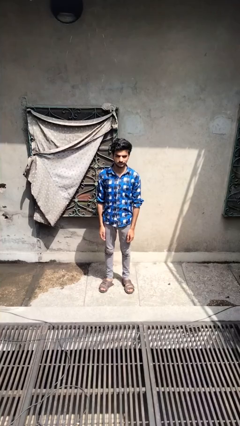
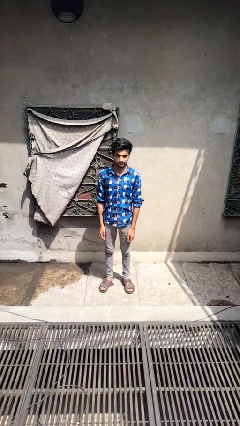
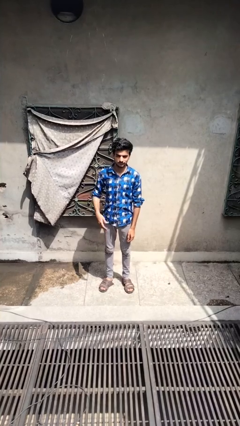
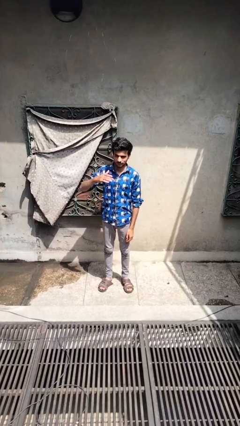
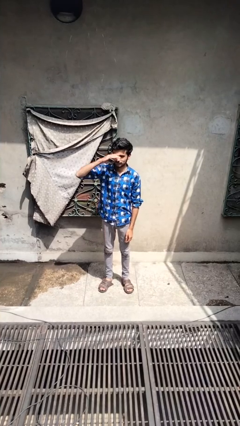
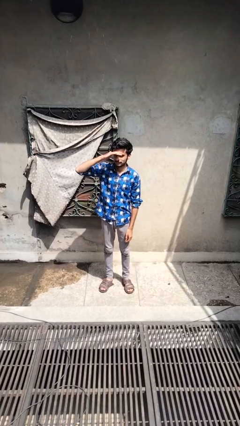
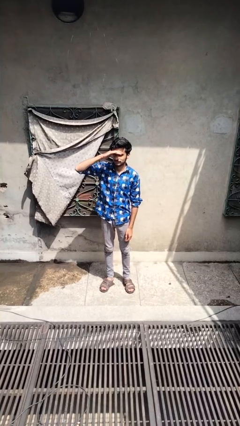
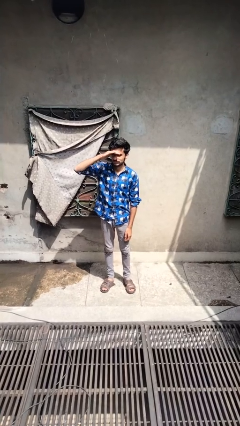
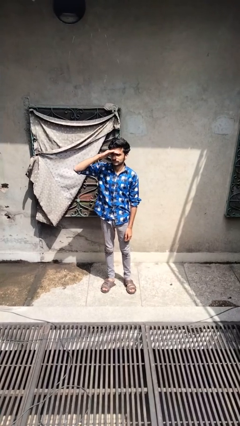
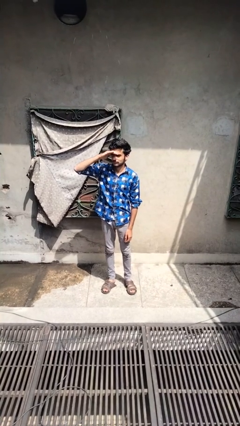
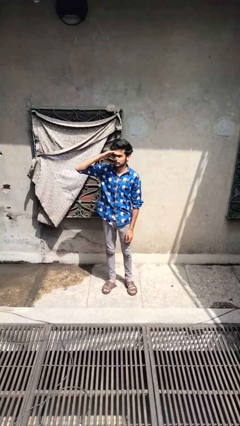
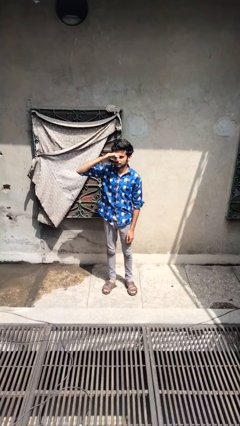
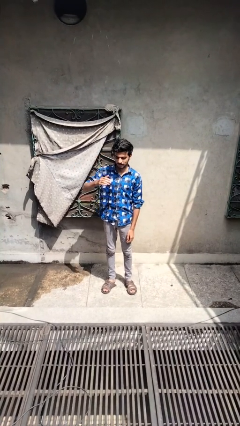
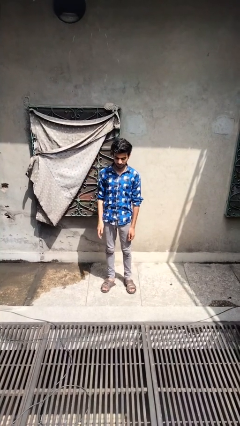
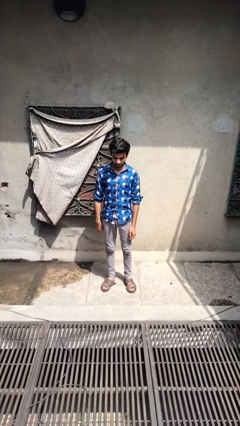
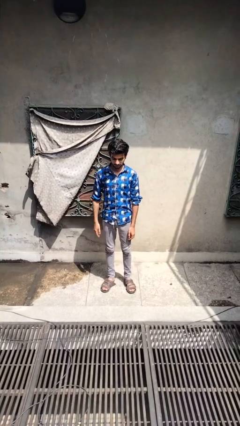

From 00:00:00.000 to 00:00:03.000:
person shades eyes

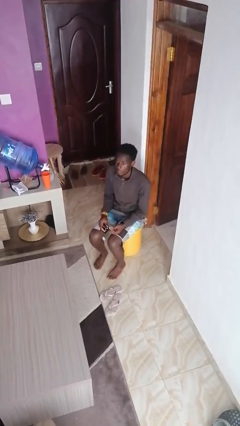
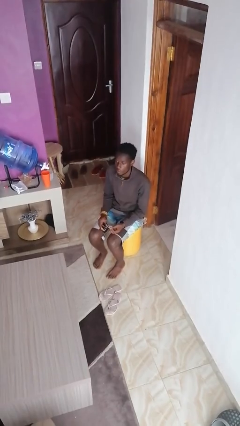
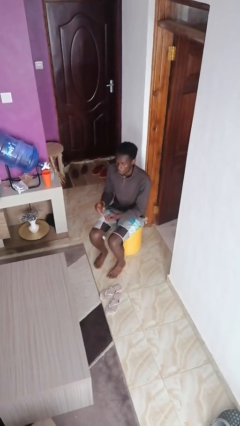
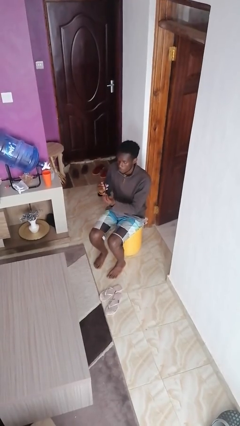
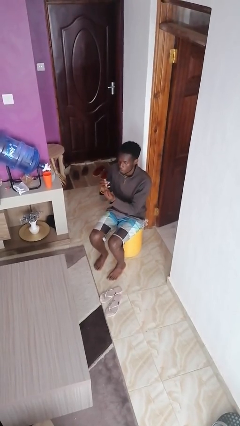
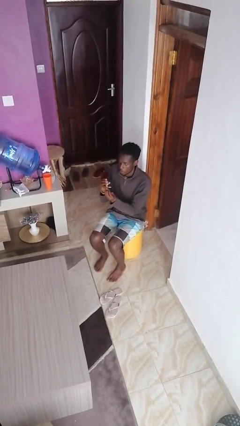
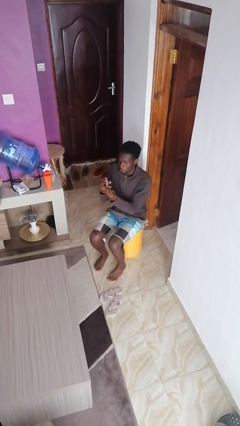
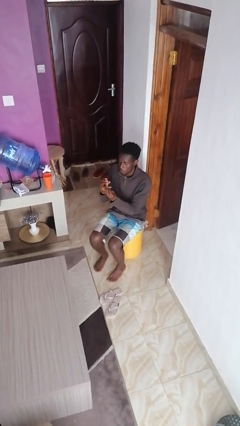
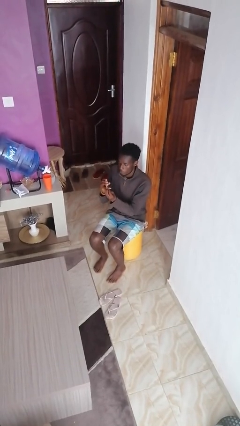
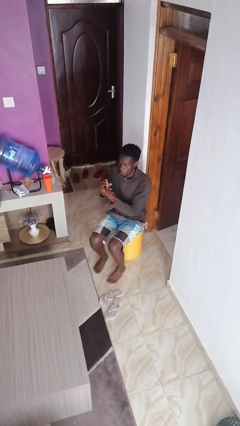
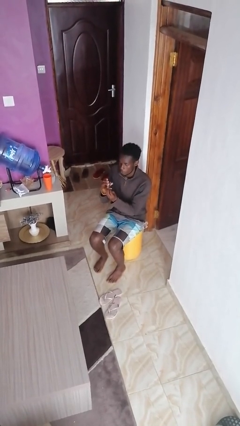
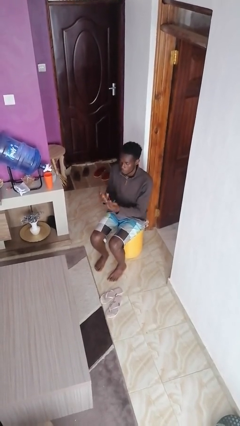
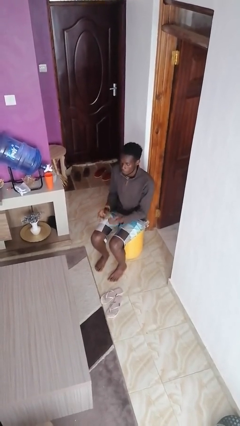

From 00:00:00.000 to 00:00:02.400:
person clips fingernails

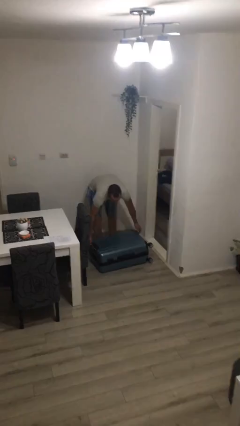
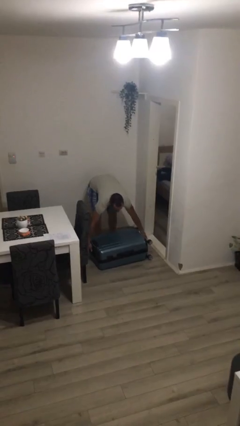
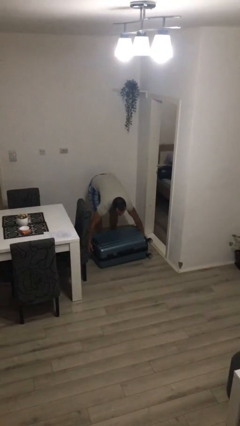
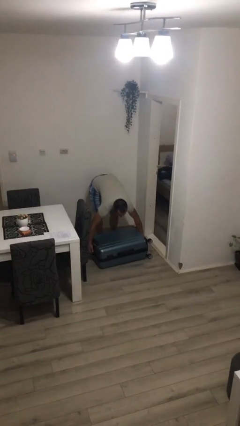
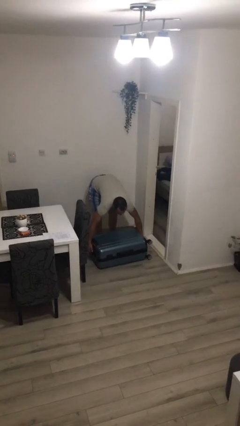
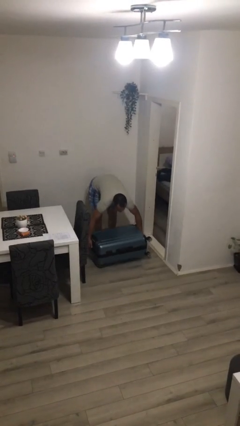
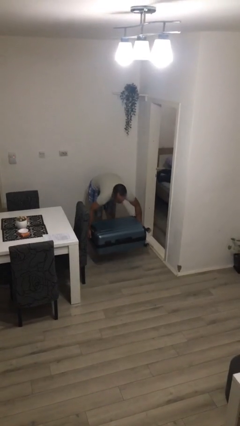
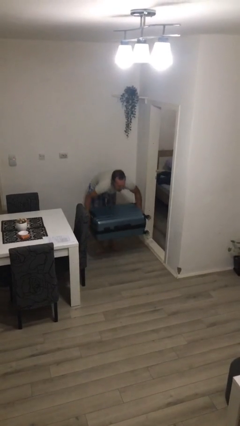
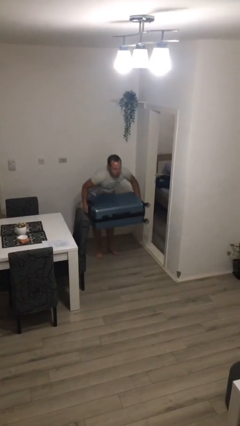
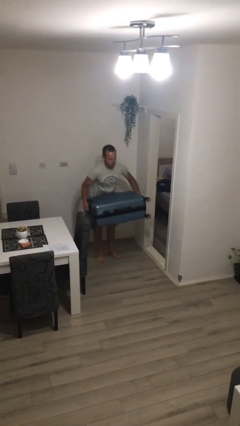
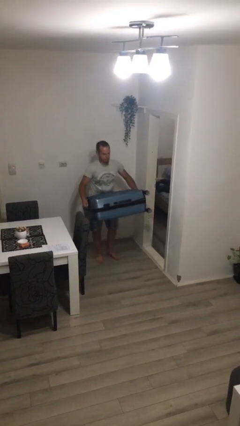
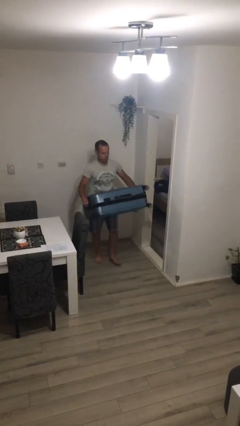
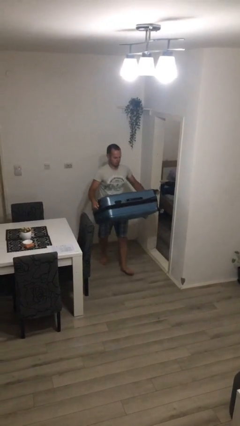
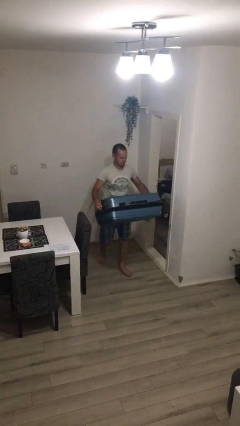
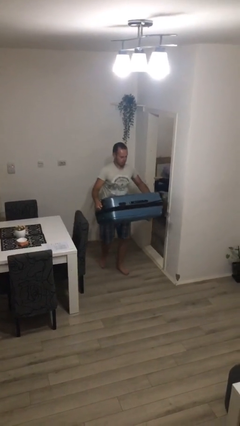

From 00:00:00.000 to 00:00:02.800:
person picks up object from floor

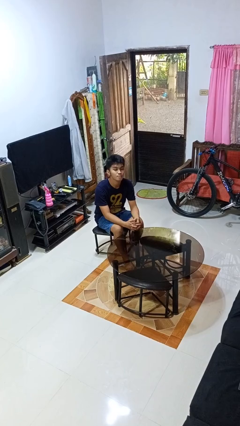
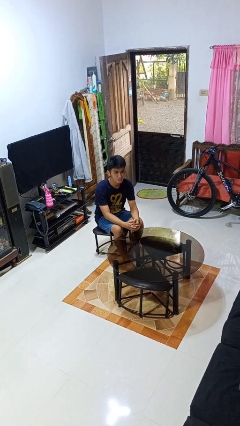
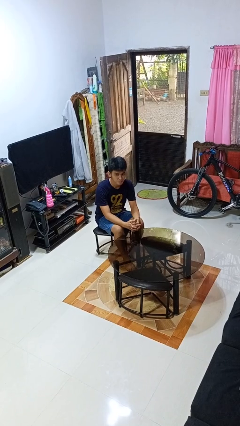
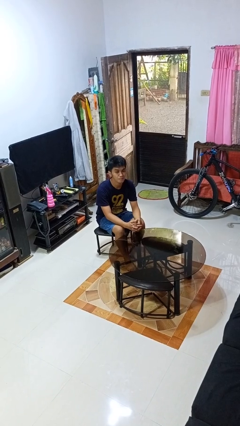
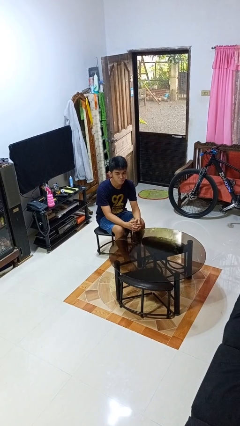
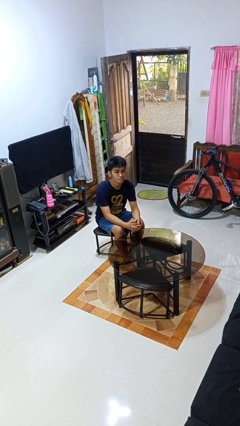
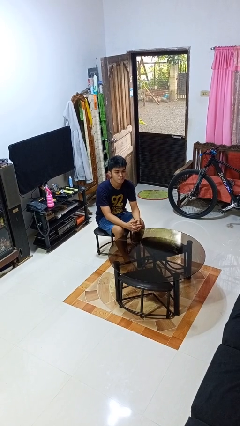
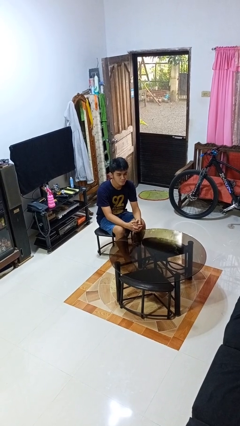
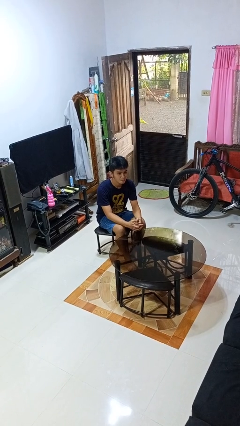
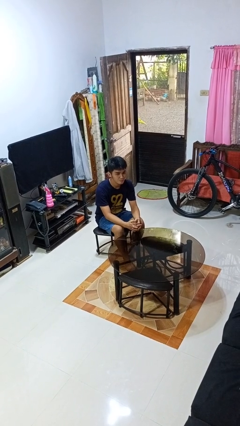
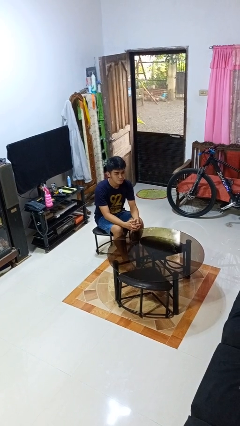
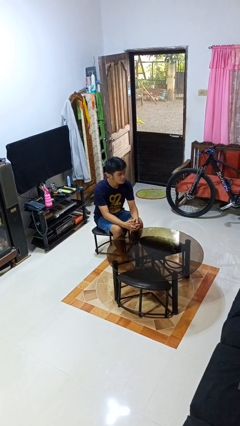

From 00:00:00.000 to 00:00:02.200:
person nods head

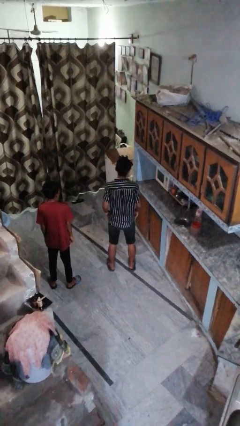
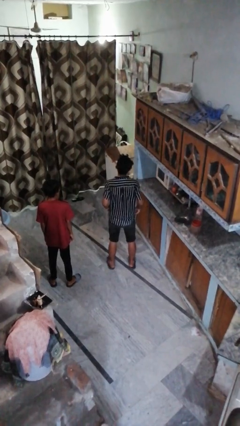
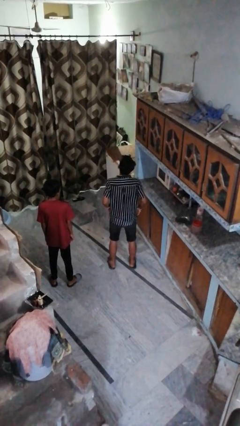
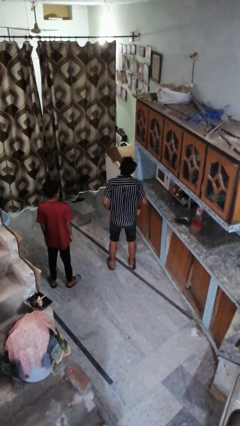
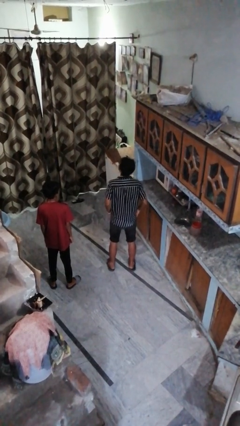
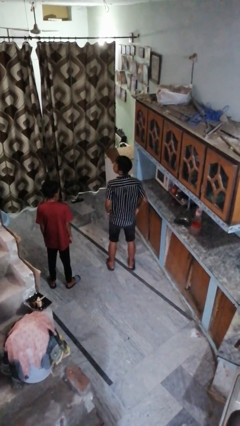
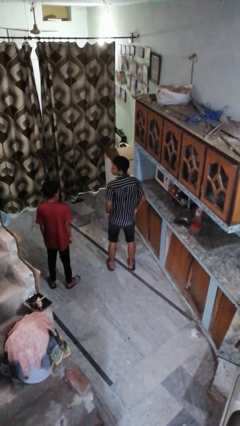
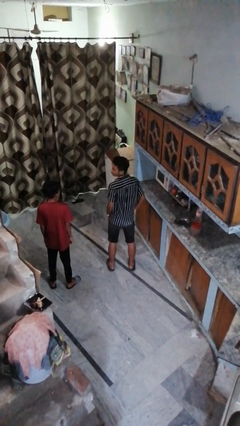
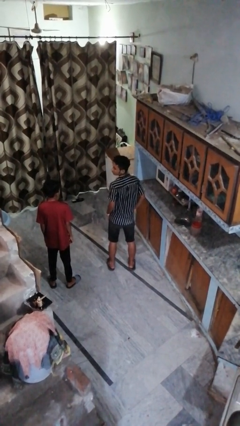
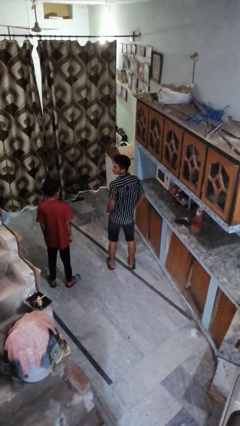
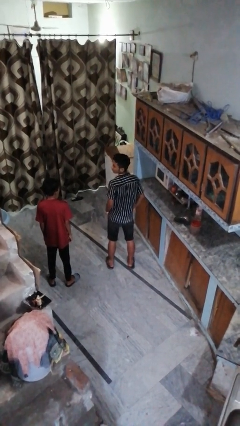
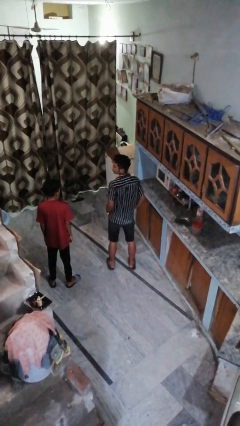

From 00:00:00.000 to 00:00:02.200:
person looks over shoulder

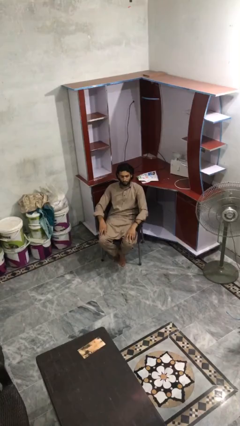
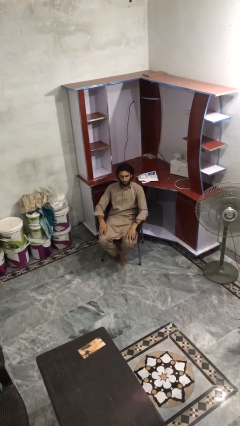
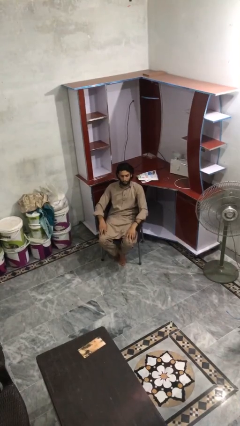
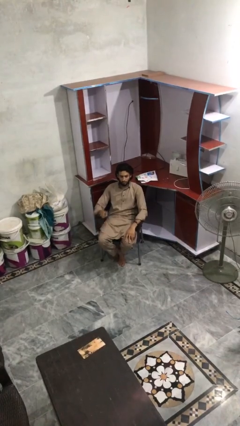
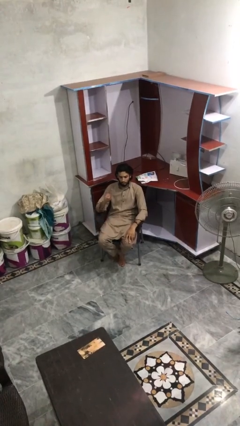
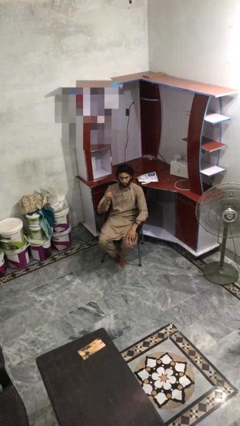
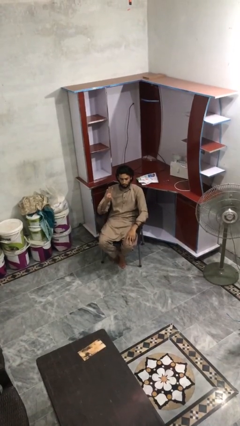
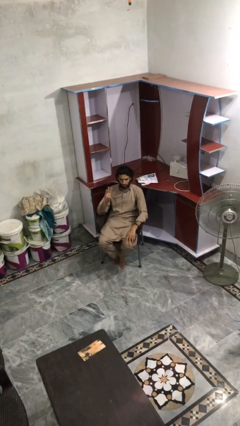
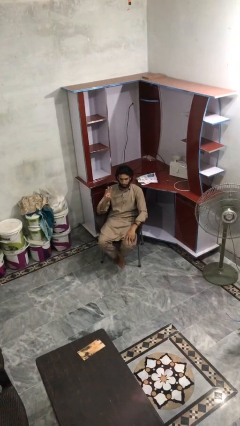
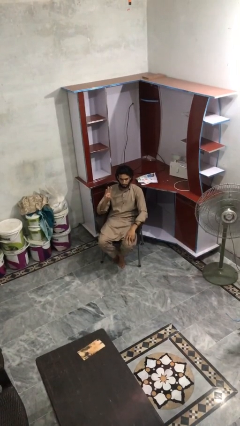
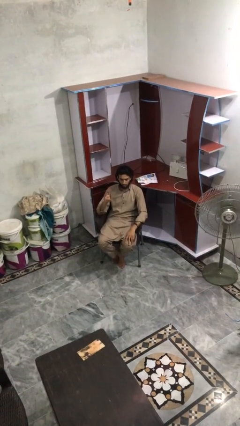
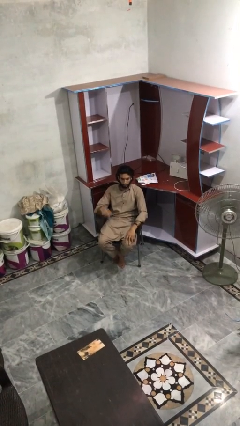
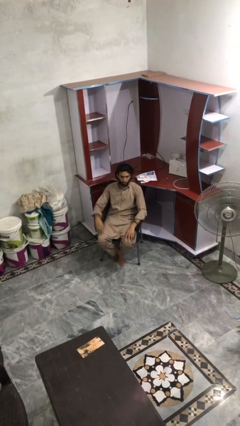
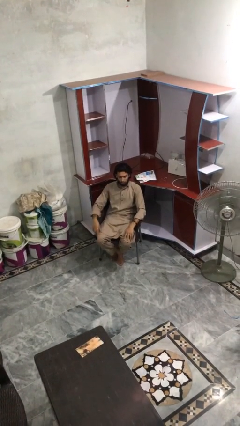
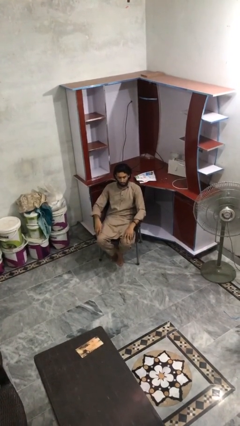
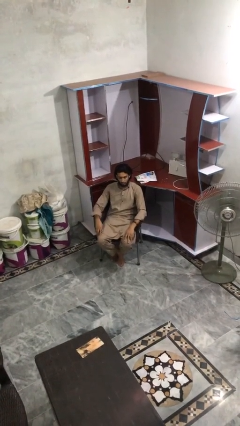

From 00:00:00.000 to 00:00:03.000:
person gestures number three

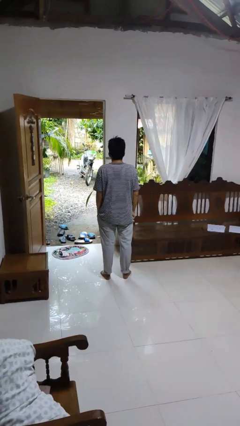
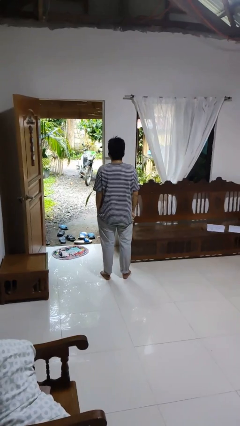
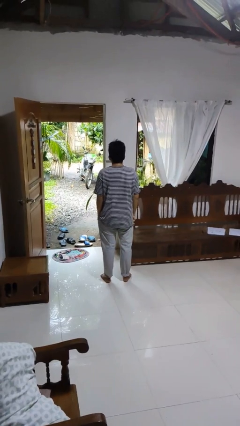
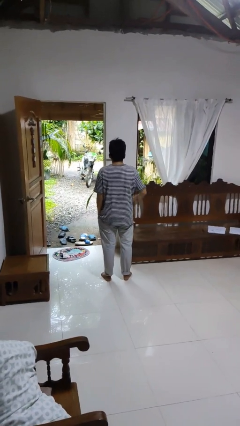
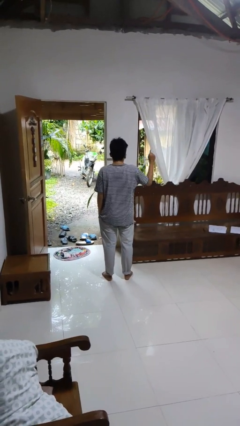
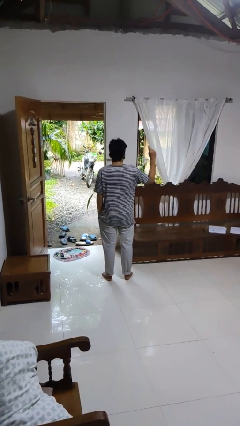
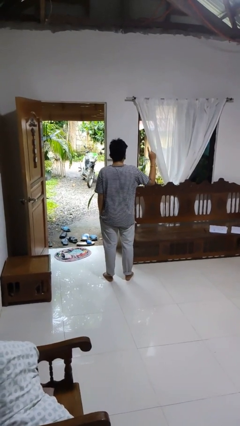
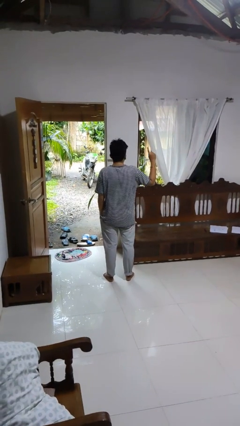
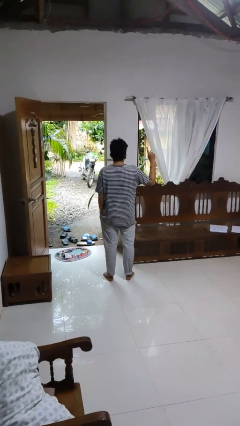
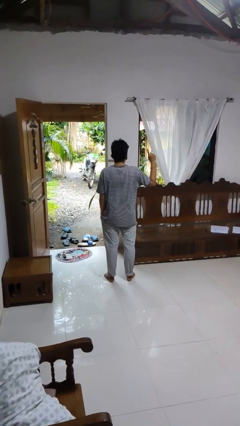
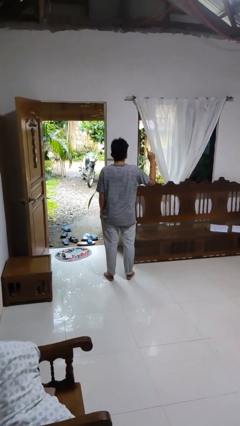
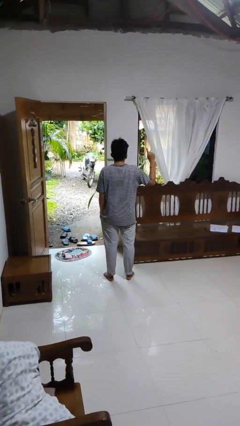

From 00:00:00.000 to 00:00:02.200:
person gestures number one
